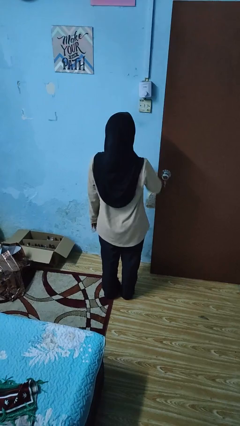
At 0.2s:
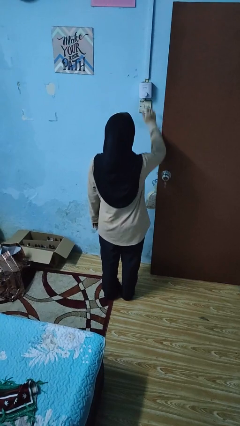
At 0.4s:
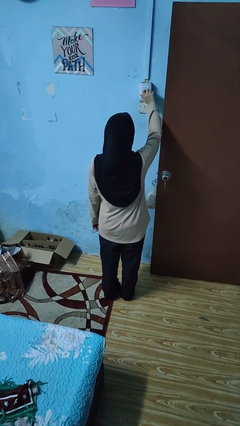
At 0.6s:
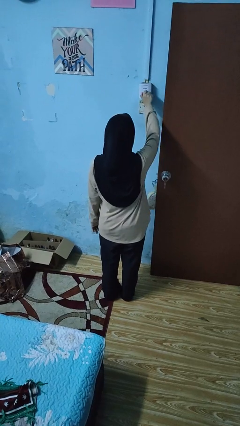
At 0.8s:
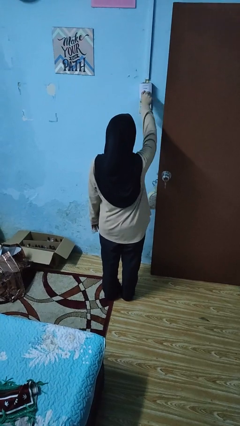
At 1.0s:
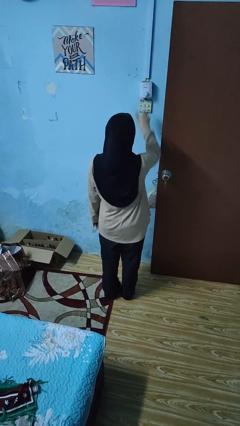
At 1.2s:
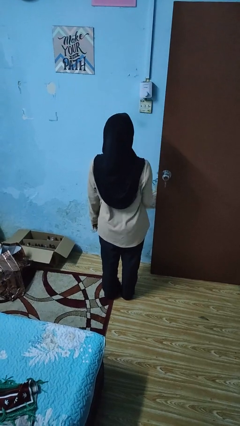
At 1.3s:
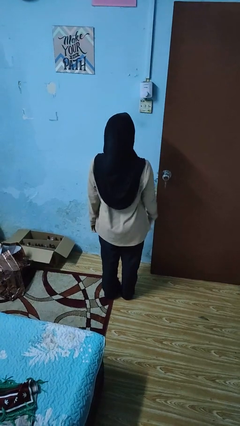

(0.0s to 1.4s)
person adjusts thermostat

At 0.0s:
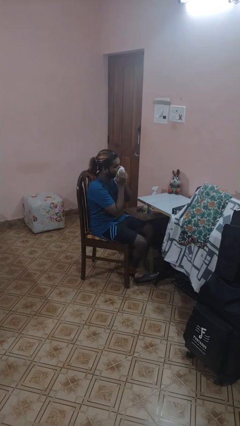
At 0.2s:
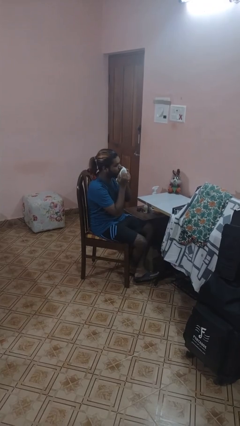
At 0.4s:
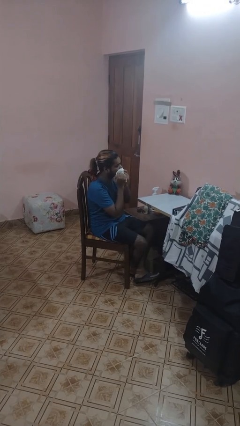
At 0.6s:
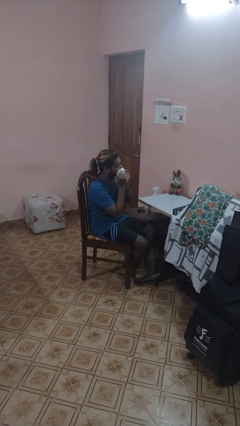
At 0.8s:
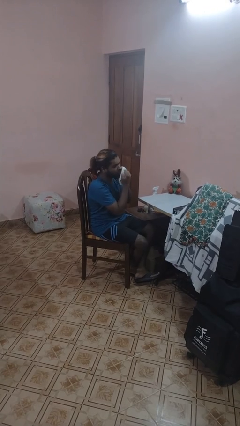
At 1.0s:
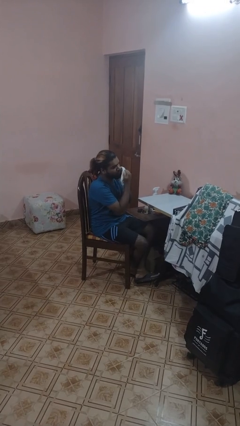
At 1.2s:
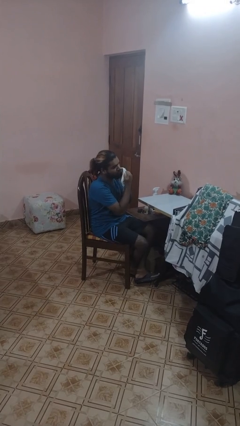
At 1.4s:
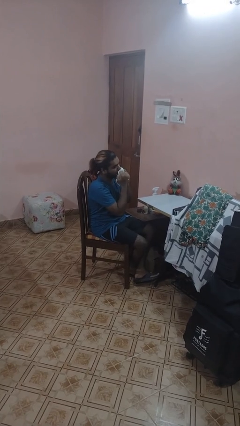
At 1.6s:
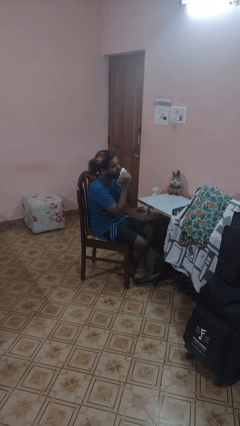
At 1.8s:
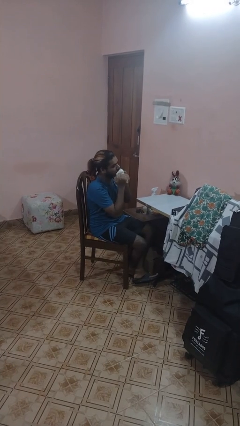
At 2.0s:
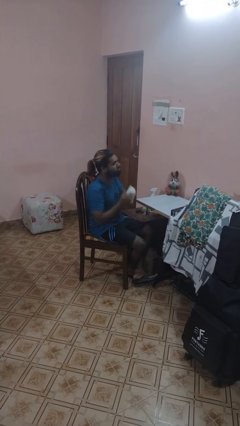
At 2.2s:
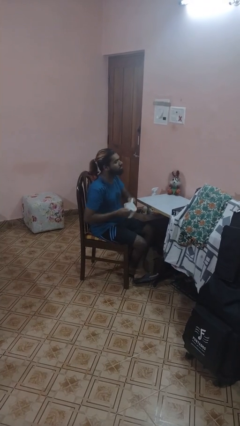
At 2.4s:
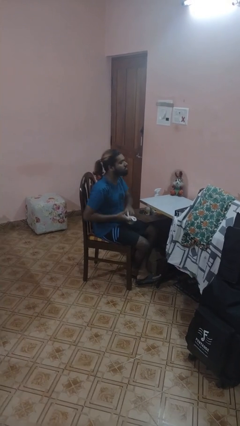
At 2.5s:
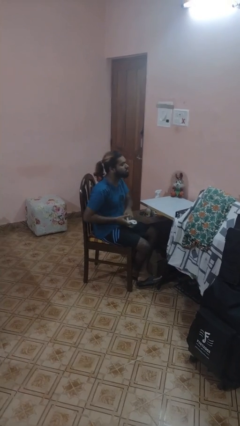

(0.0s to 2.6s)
person wipes mouth with napkin

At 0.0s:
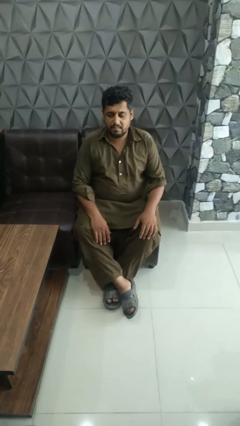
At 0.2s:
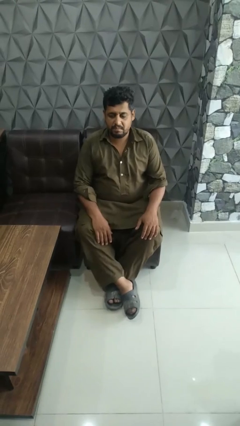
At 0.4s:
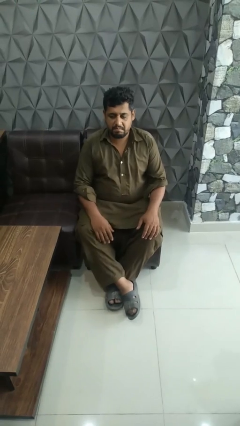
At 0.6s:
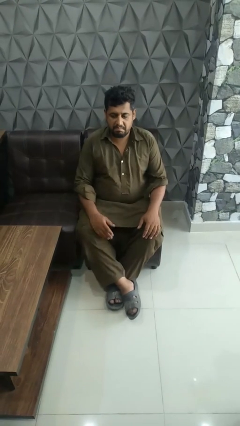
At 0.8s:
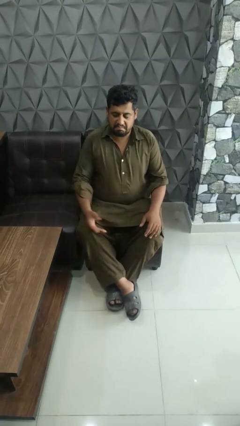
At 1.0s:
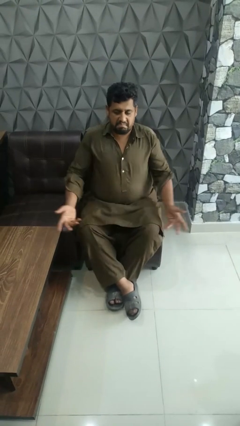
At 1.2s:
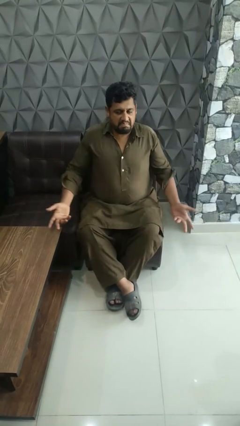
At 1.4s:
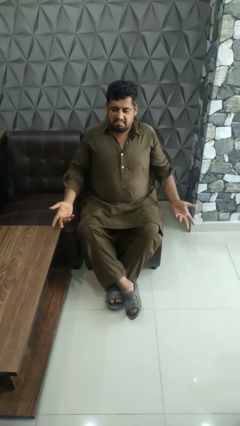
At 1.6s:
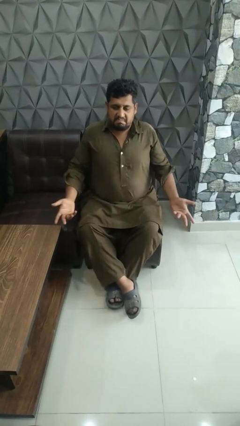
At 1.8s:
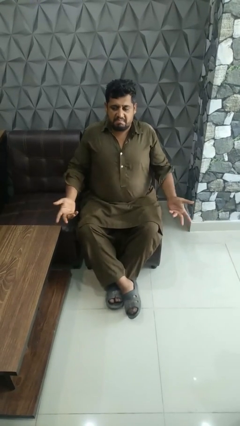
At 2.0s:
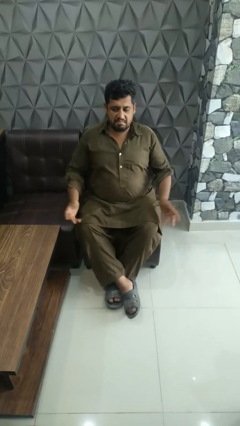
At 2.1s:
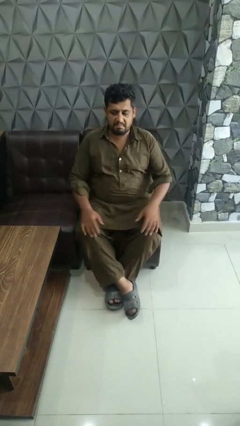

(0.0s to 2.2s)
person shrugs

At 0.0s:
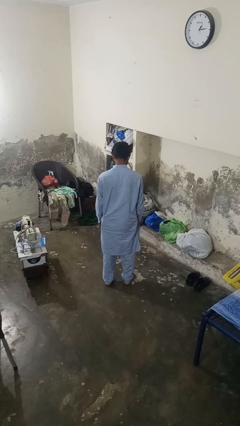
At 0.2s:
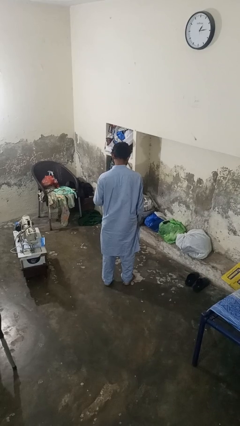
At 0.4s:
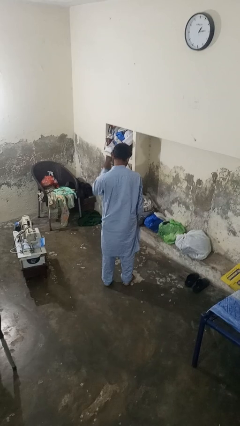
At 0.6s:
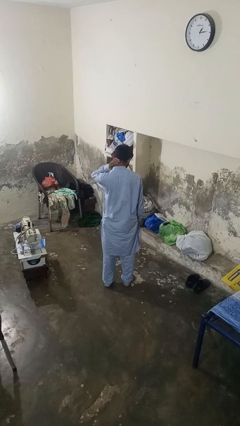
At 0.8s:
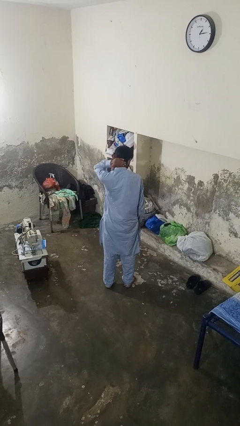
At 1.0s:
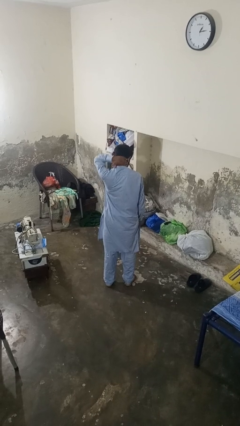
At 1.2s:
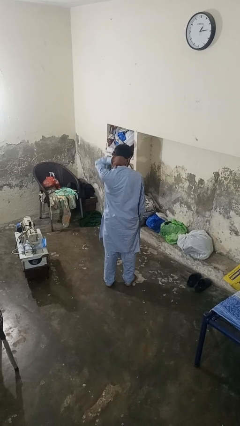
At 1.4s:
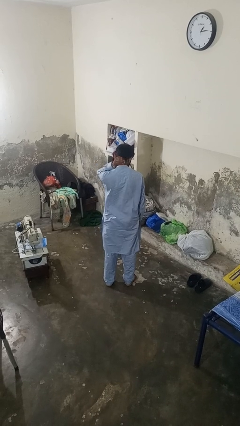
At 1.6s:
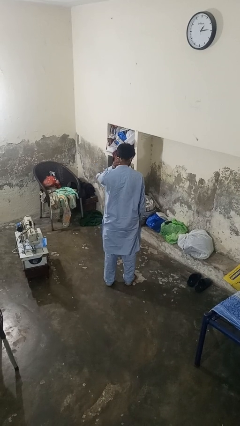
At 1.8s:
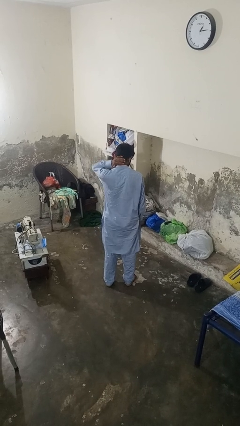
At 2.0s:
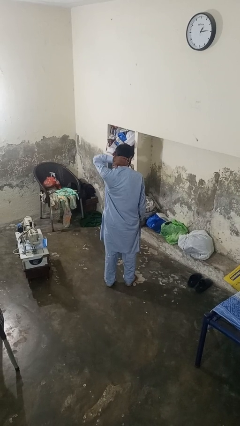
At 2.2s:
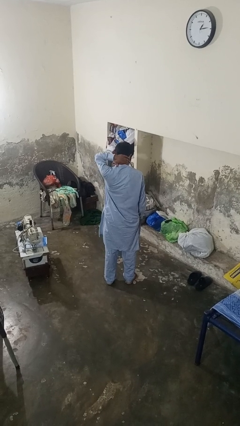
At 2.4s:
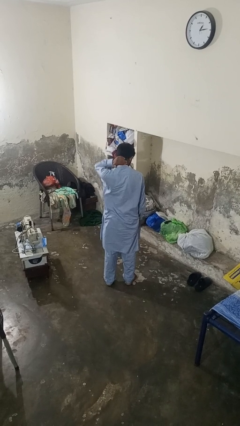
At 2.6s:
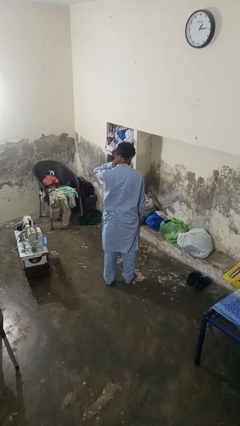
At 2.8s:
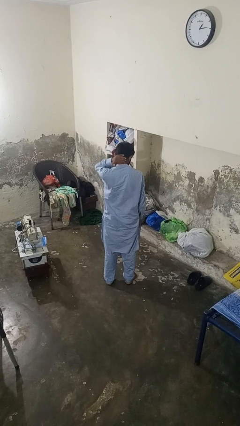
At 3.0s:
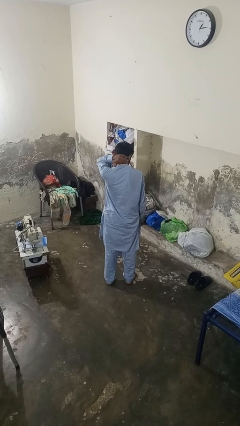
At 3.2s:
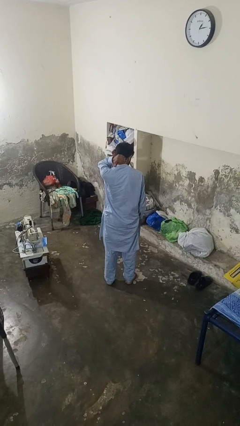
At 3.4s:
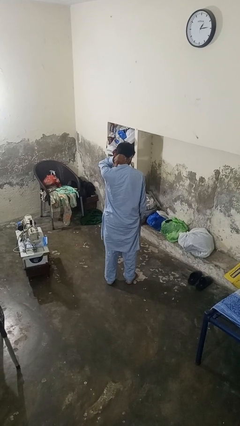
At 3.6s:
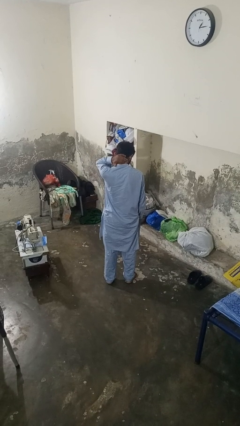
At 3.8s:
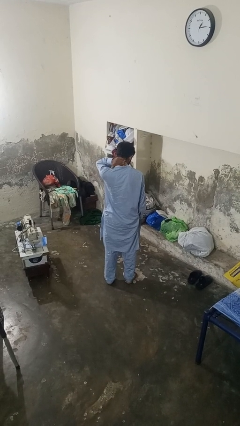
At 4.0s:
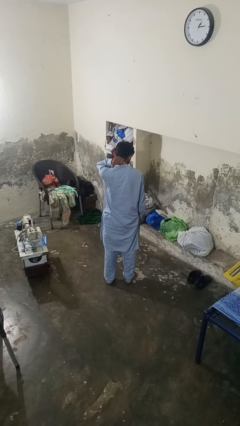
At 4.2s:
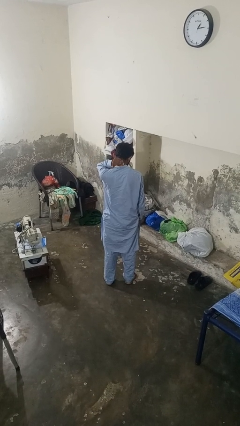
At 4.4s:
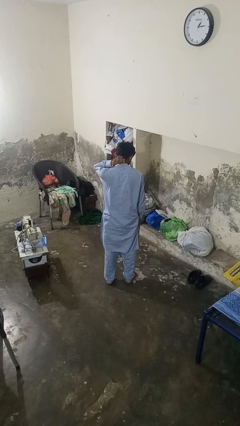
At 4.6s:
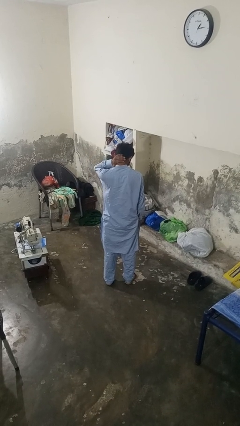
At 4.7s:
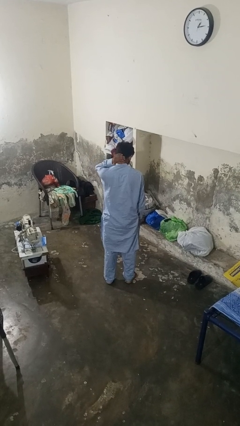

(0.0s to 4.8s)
person rubs neck

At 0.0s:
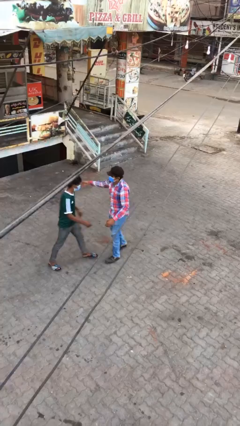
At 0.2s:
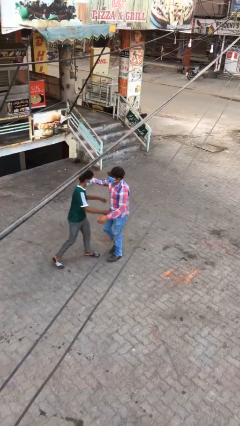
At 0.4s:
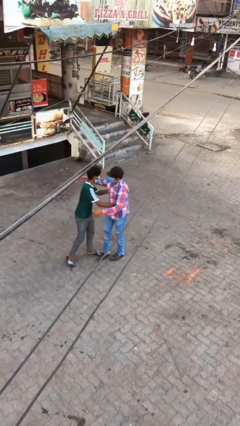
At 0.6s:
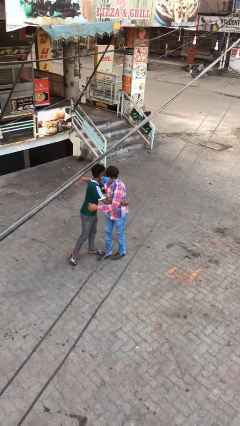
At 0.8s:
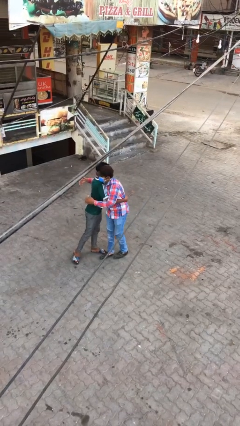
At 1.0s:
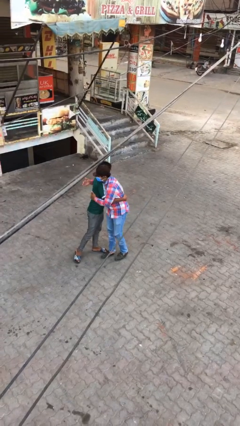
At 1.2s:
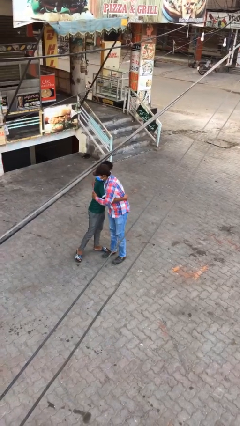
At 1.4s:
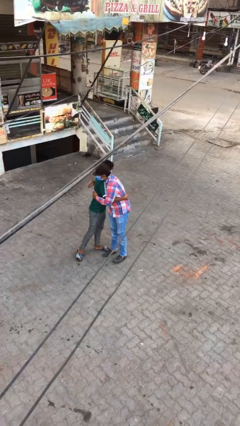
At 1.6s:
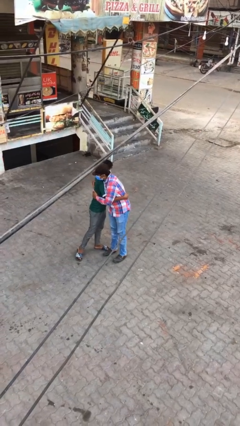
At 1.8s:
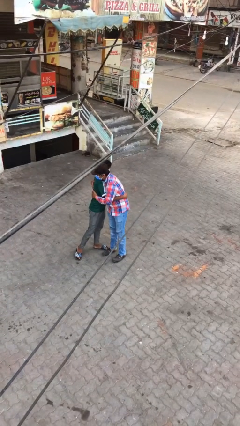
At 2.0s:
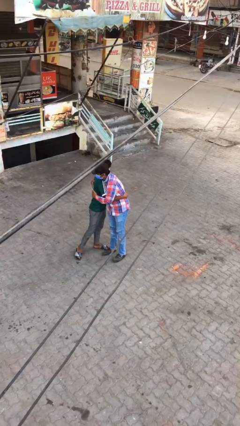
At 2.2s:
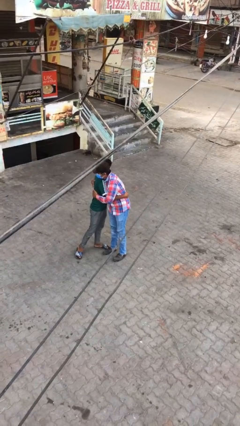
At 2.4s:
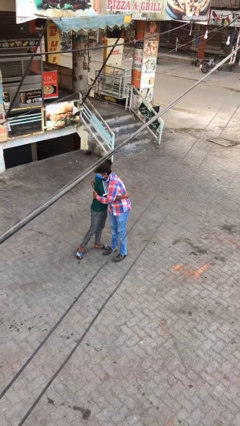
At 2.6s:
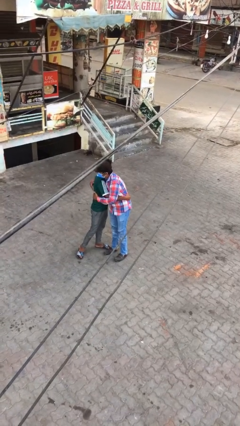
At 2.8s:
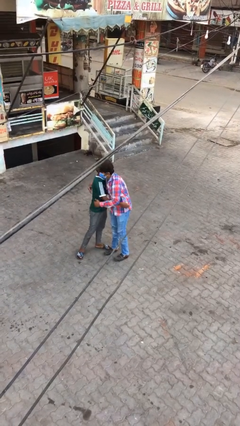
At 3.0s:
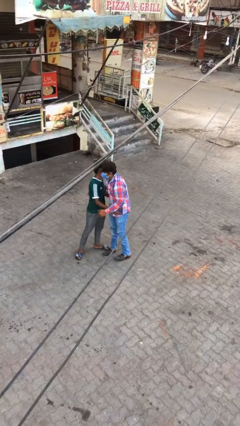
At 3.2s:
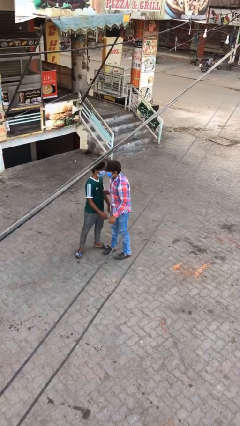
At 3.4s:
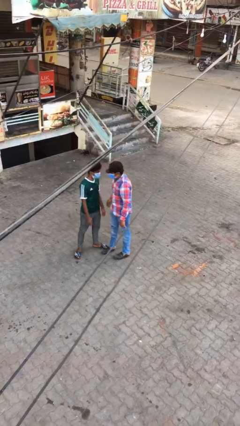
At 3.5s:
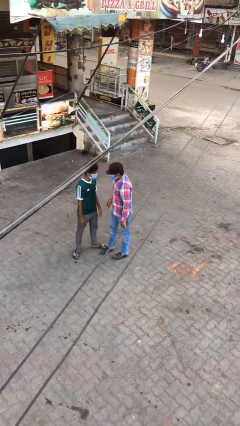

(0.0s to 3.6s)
person embraces person

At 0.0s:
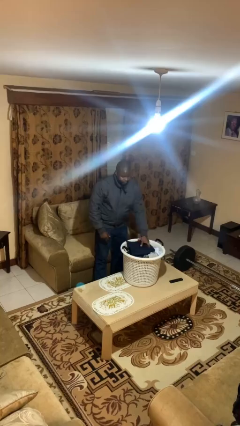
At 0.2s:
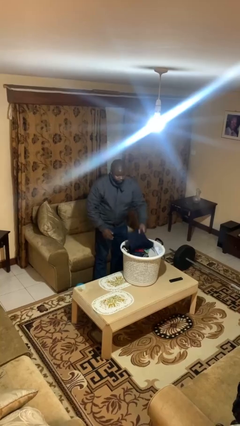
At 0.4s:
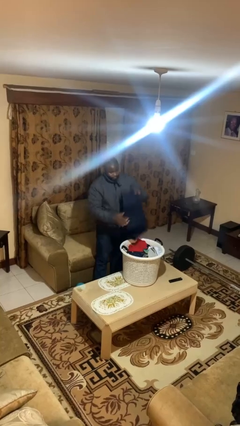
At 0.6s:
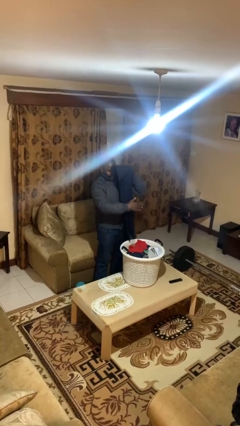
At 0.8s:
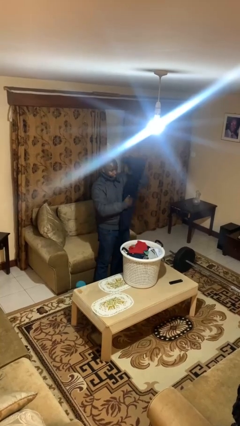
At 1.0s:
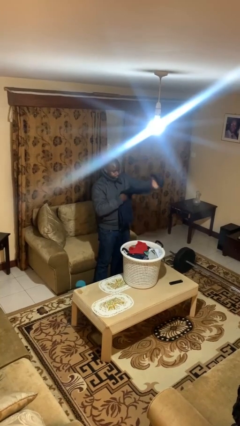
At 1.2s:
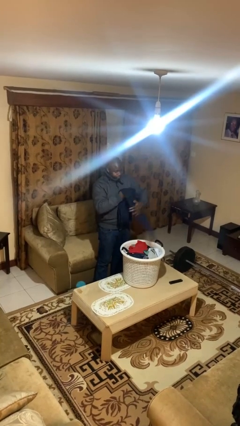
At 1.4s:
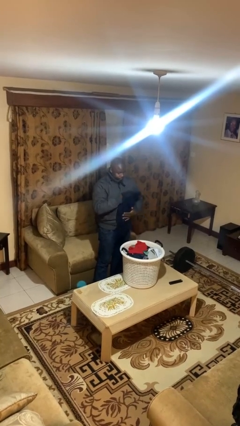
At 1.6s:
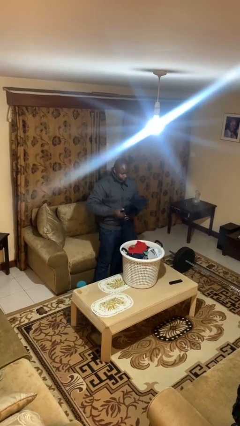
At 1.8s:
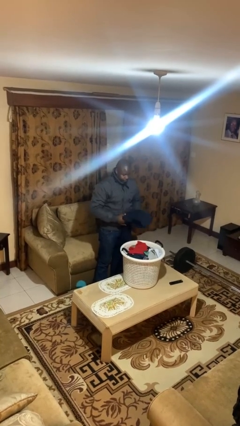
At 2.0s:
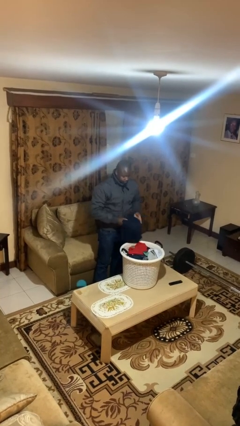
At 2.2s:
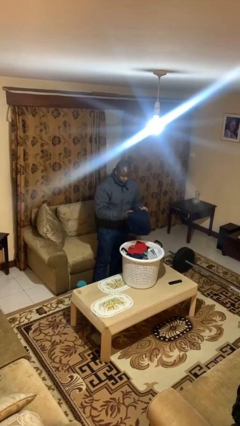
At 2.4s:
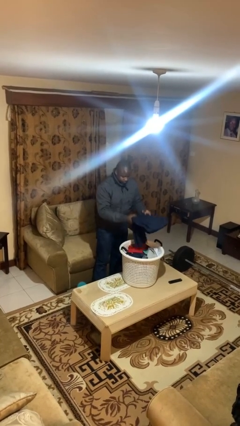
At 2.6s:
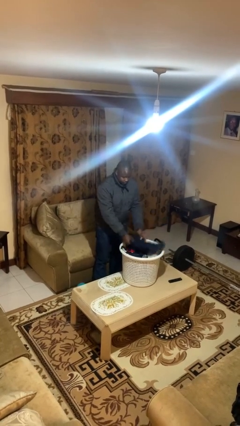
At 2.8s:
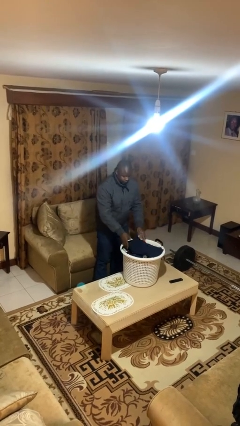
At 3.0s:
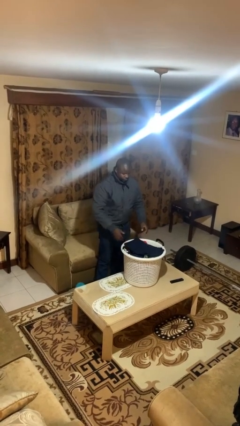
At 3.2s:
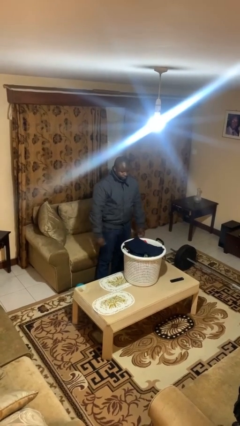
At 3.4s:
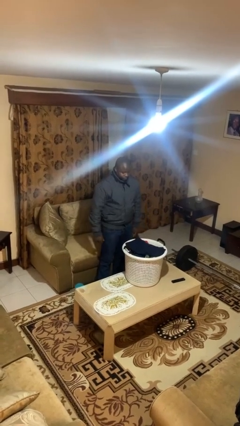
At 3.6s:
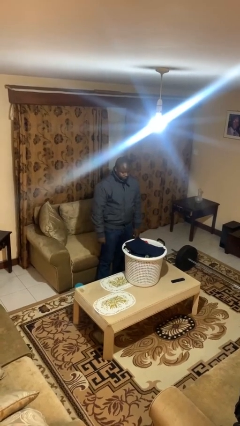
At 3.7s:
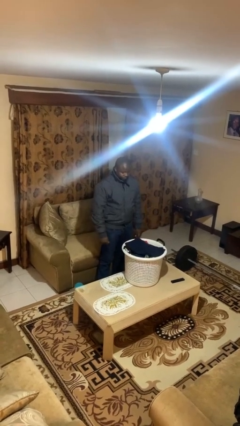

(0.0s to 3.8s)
person folds pants
